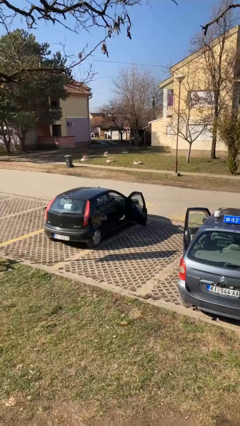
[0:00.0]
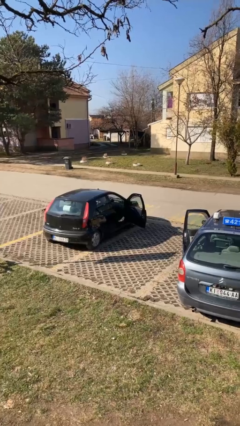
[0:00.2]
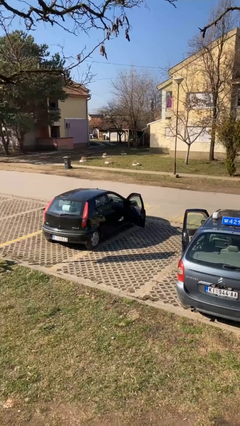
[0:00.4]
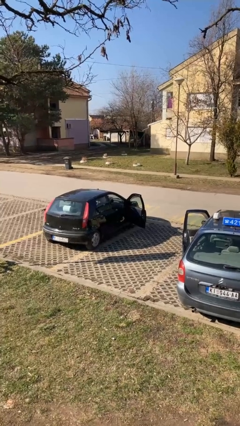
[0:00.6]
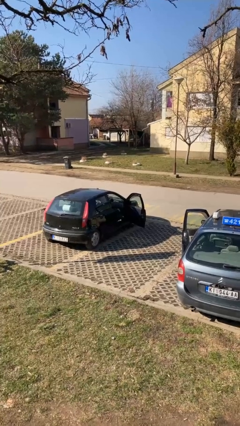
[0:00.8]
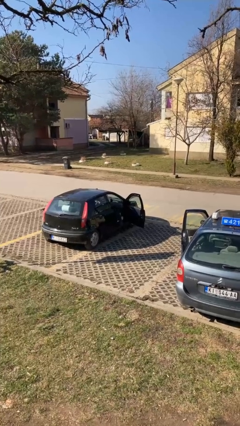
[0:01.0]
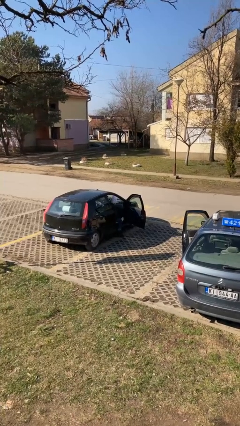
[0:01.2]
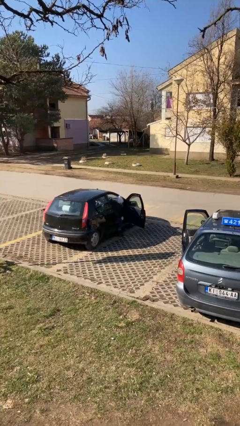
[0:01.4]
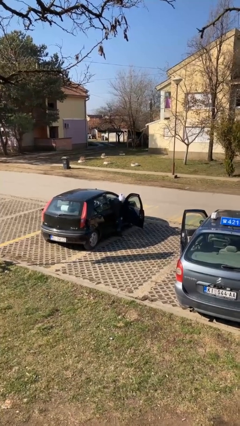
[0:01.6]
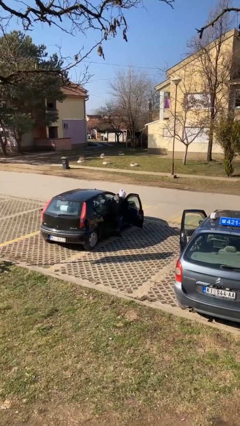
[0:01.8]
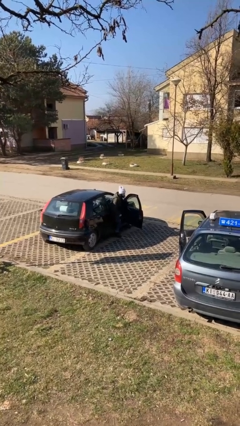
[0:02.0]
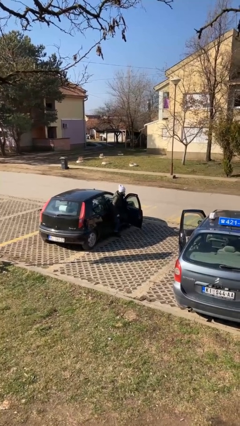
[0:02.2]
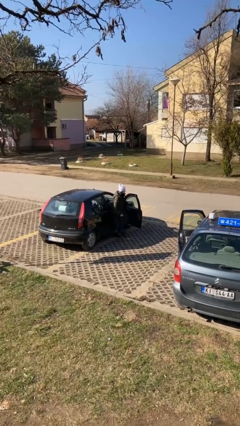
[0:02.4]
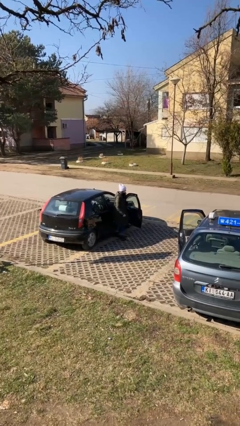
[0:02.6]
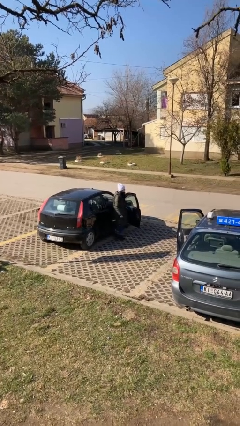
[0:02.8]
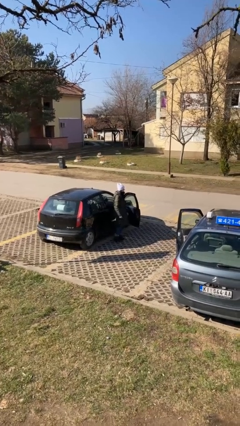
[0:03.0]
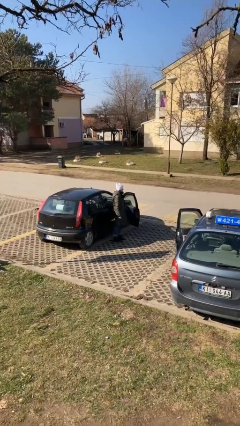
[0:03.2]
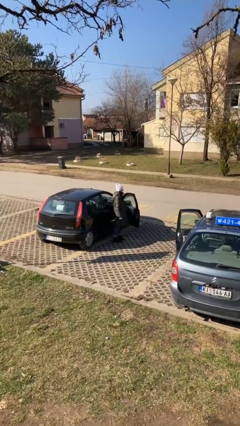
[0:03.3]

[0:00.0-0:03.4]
person exits car

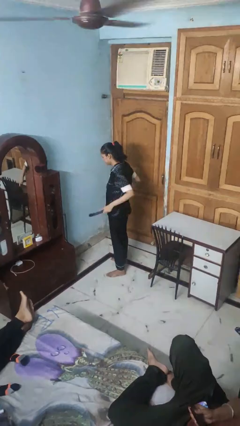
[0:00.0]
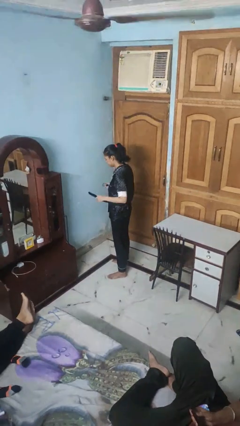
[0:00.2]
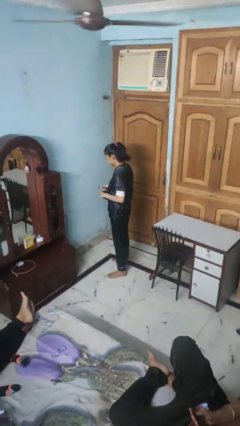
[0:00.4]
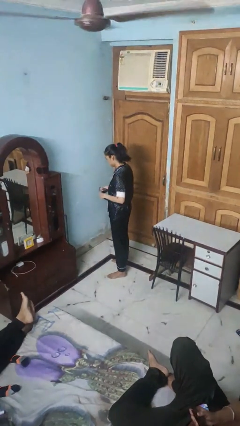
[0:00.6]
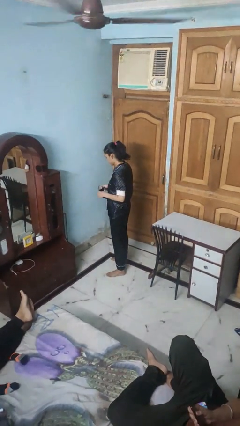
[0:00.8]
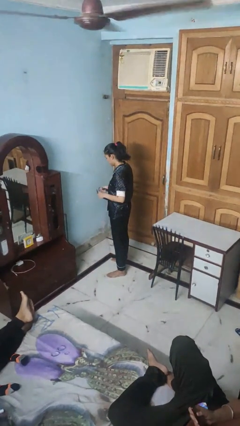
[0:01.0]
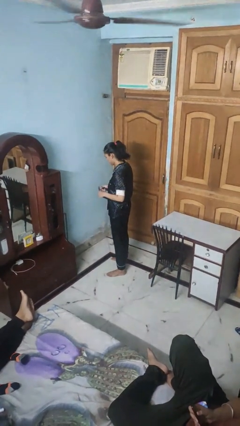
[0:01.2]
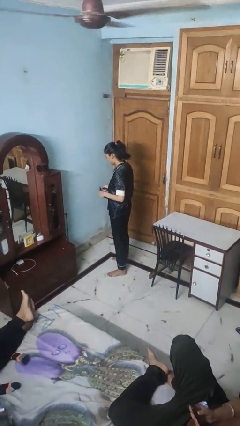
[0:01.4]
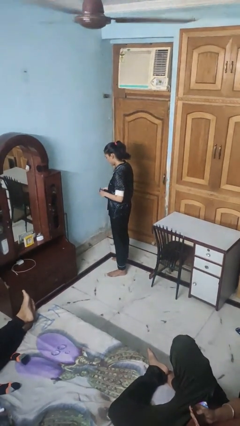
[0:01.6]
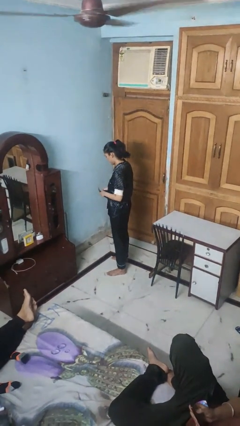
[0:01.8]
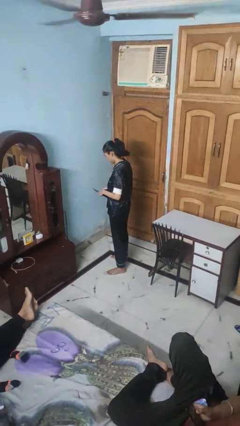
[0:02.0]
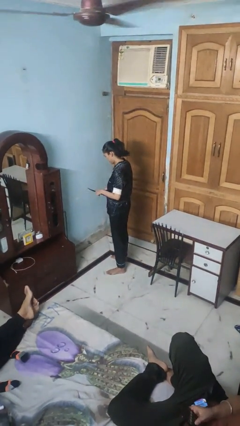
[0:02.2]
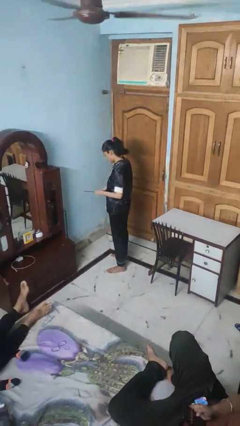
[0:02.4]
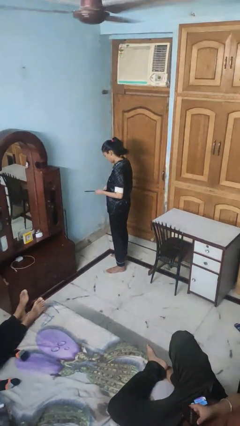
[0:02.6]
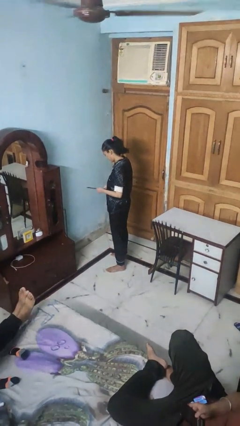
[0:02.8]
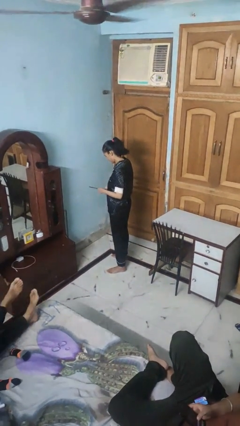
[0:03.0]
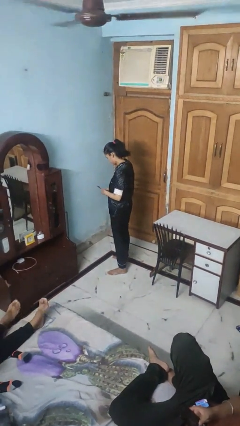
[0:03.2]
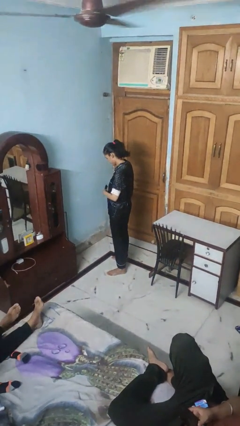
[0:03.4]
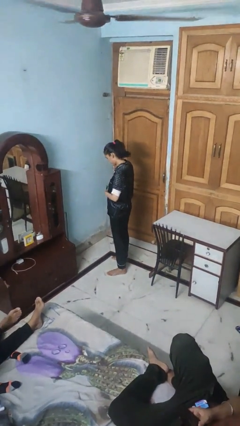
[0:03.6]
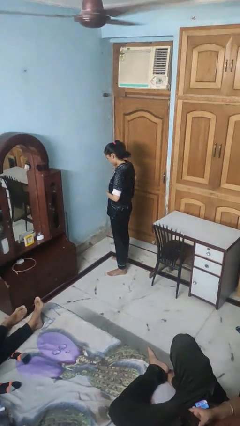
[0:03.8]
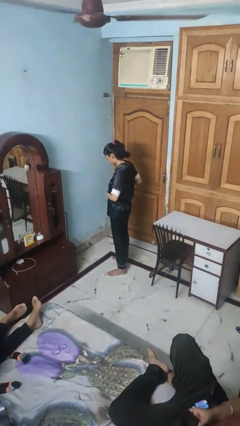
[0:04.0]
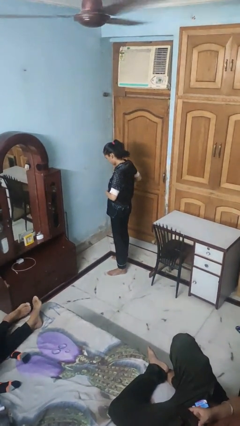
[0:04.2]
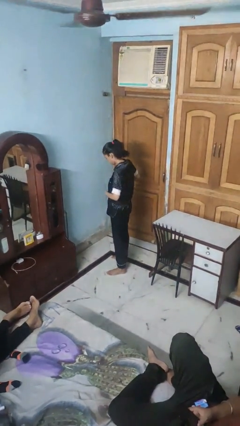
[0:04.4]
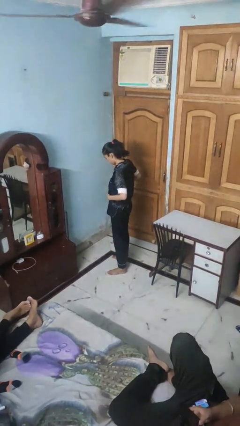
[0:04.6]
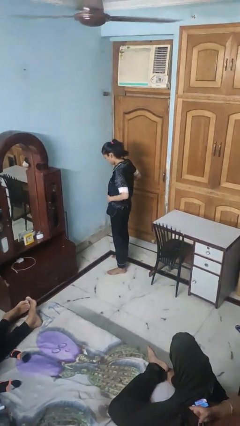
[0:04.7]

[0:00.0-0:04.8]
person puts on belt

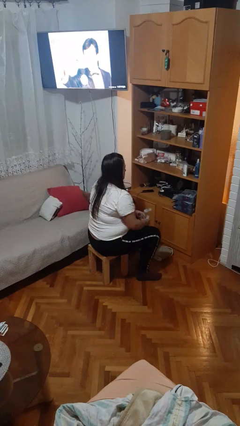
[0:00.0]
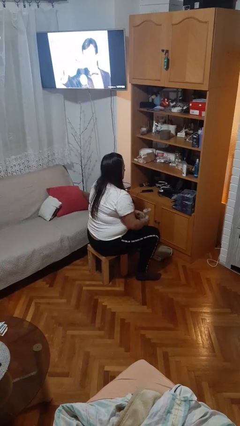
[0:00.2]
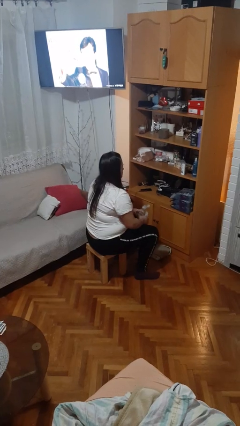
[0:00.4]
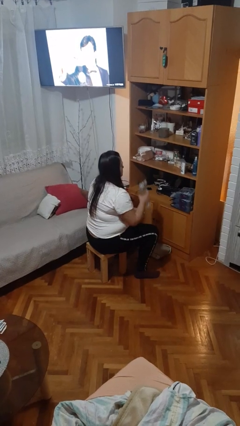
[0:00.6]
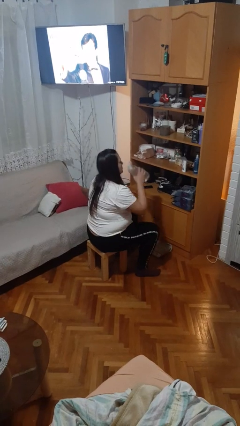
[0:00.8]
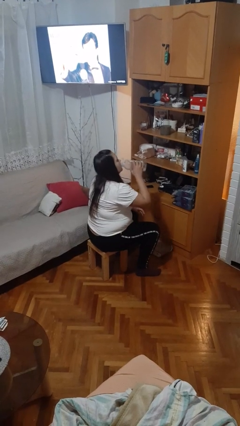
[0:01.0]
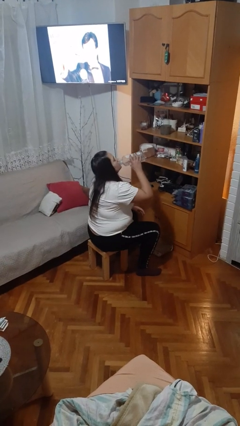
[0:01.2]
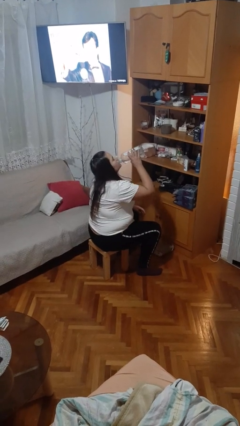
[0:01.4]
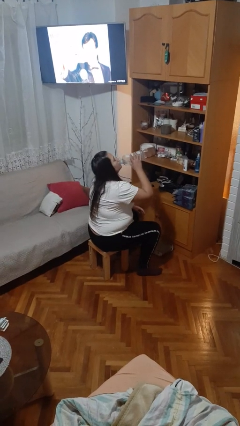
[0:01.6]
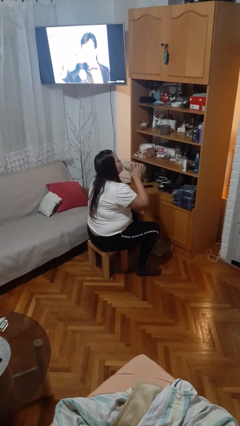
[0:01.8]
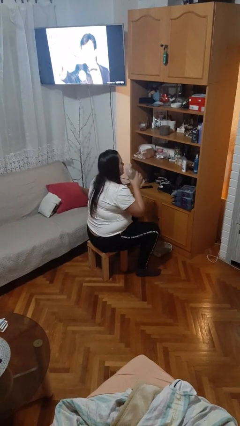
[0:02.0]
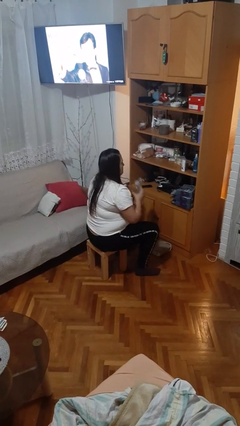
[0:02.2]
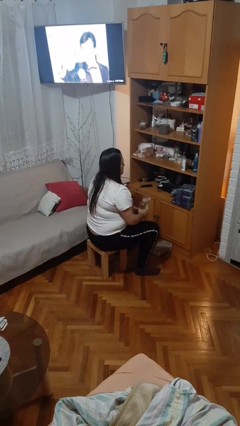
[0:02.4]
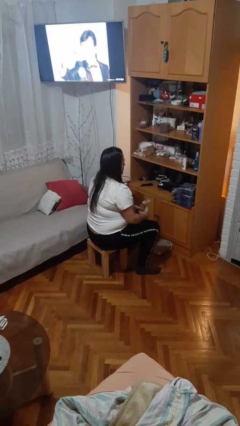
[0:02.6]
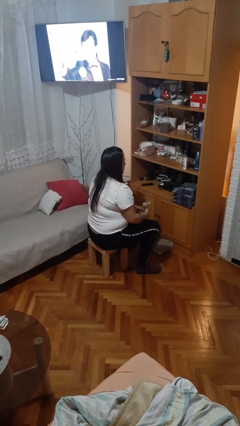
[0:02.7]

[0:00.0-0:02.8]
person drinks from bottle

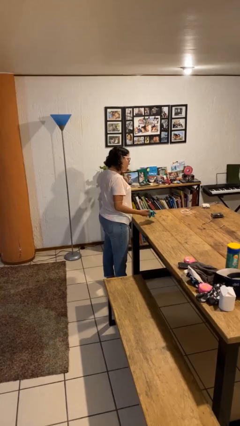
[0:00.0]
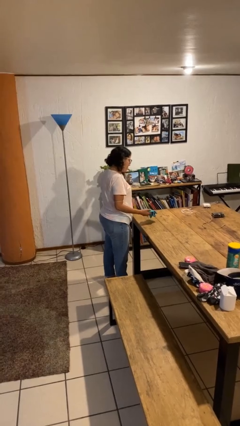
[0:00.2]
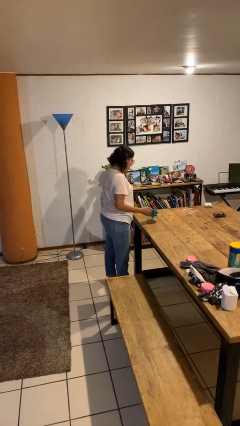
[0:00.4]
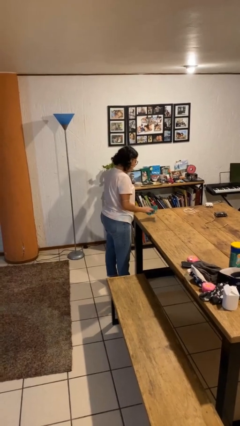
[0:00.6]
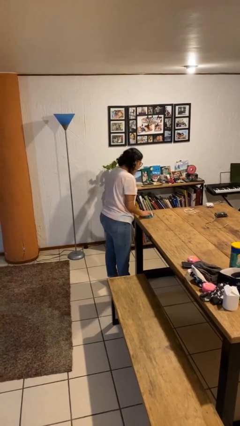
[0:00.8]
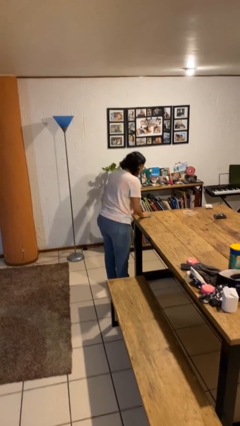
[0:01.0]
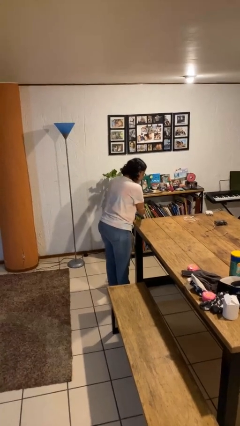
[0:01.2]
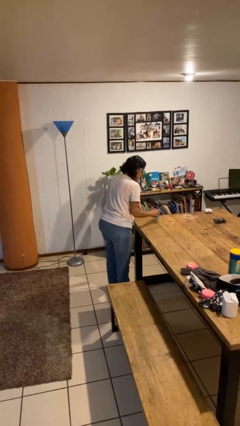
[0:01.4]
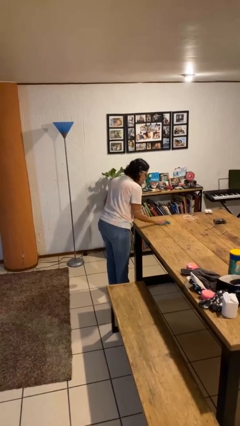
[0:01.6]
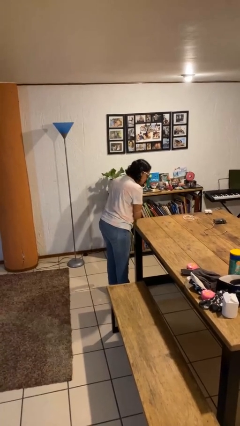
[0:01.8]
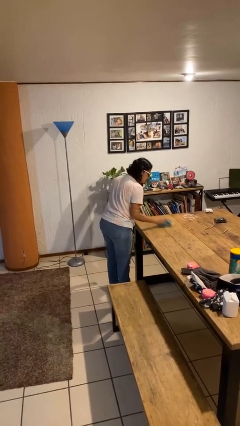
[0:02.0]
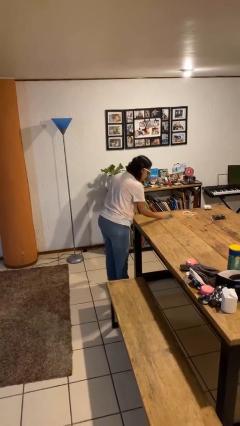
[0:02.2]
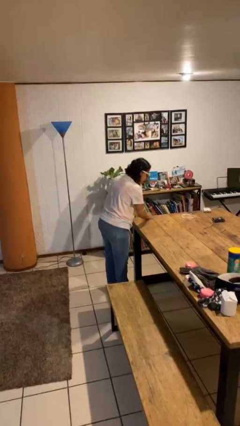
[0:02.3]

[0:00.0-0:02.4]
person cleans table with rag

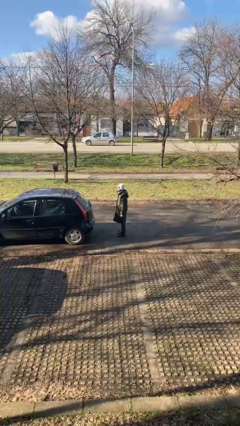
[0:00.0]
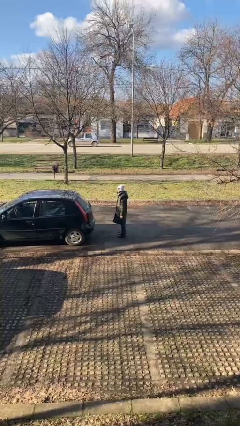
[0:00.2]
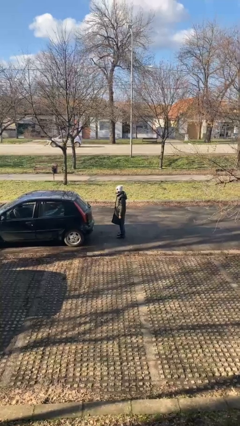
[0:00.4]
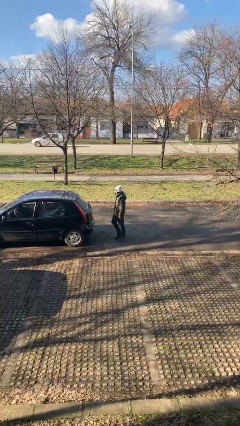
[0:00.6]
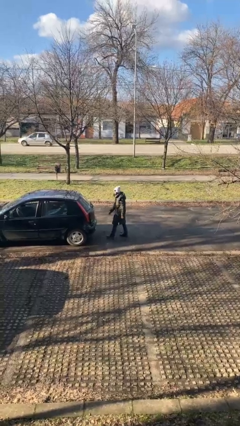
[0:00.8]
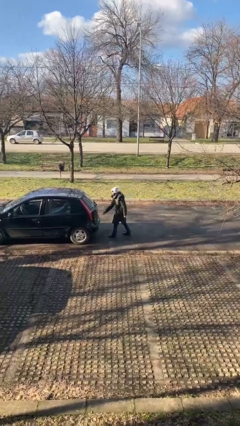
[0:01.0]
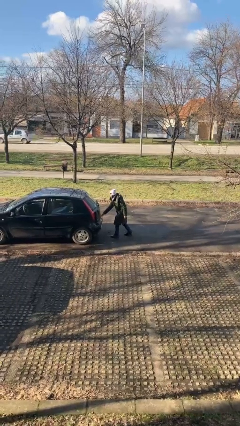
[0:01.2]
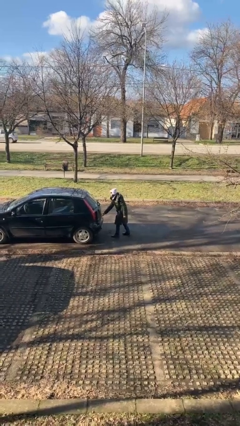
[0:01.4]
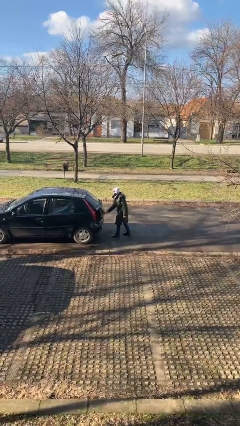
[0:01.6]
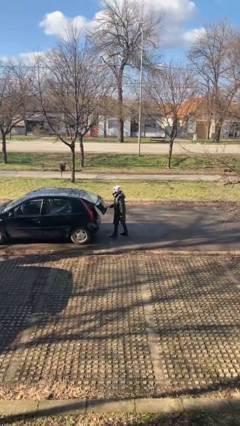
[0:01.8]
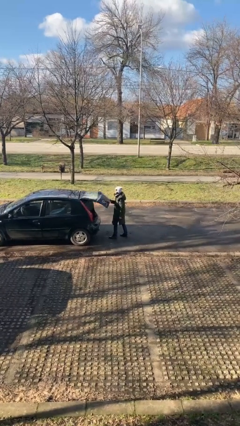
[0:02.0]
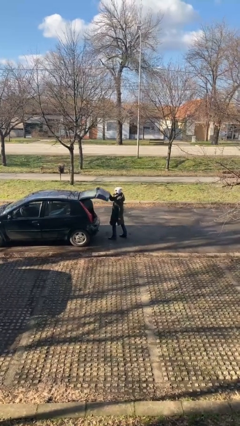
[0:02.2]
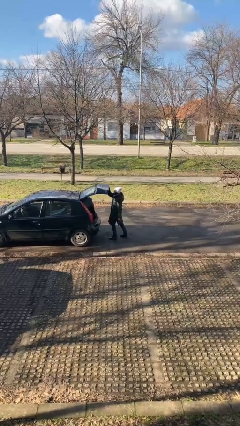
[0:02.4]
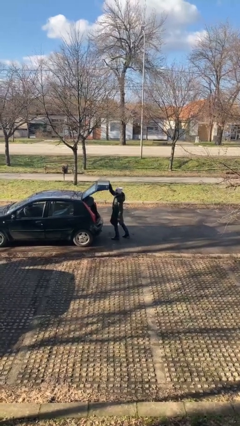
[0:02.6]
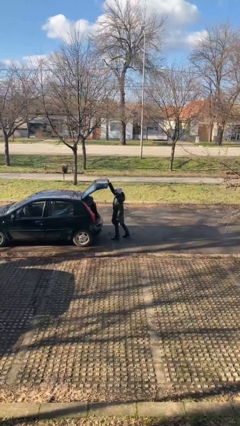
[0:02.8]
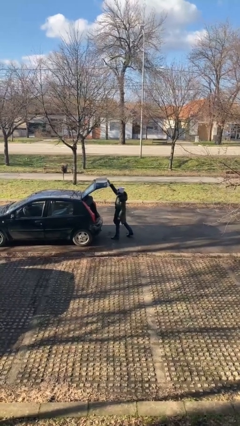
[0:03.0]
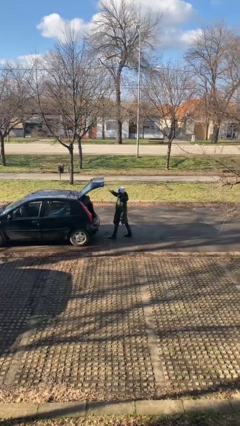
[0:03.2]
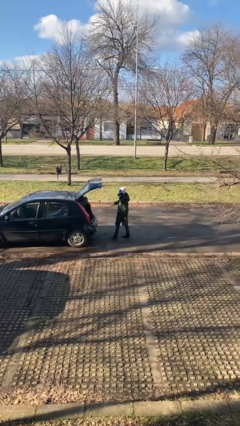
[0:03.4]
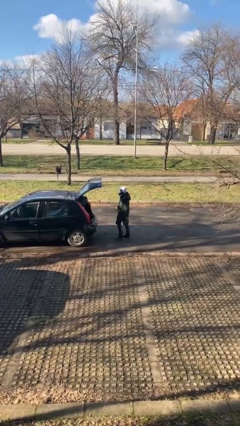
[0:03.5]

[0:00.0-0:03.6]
person opens car trunk

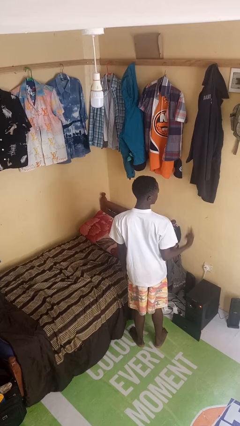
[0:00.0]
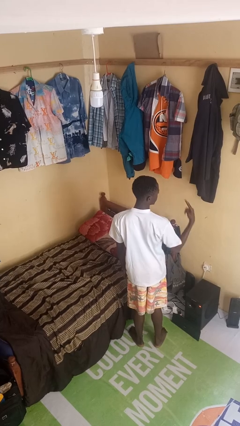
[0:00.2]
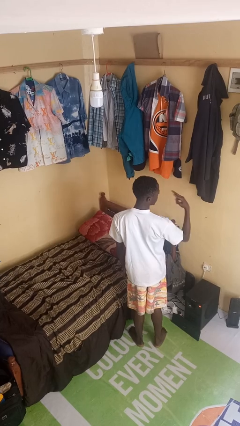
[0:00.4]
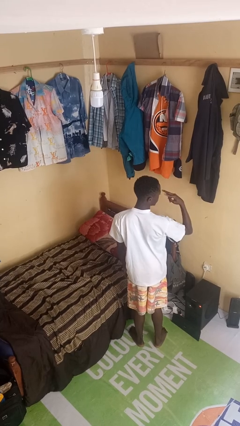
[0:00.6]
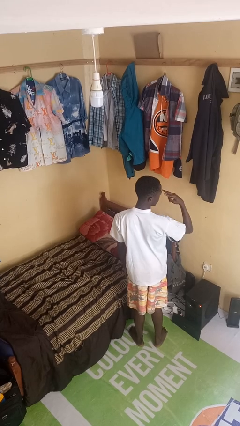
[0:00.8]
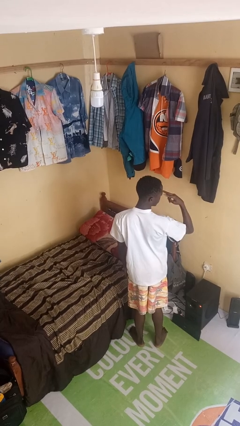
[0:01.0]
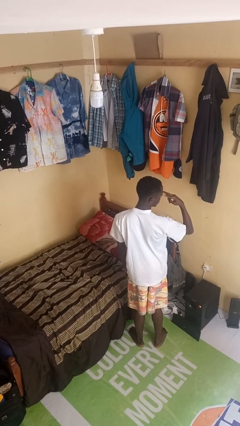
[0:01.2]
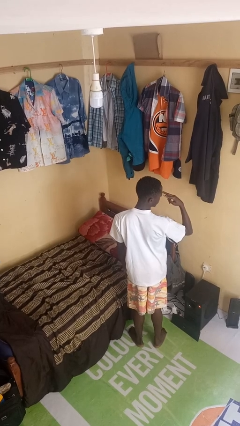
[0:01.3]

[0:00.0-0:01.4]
person gestures watch closely
